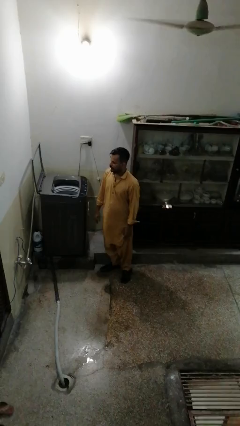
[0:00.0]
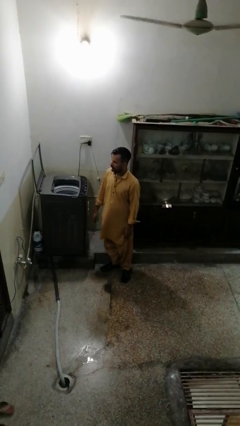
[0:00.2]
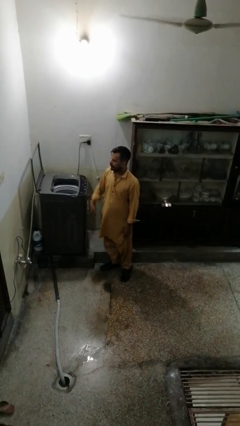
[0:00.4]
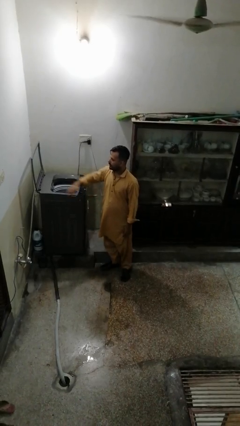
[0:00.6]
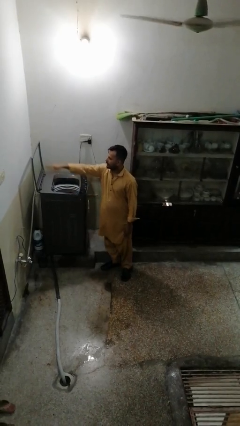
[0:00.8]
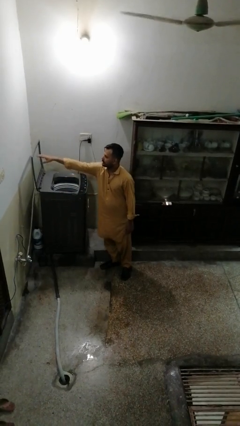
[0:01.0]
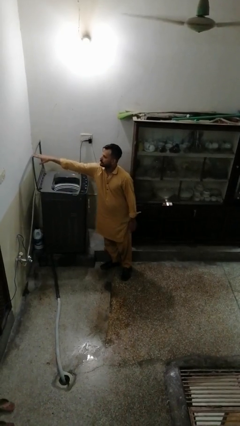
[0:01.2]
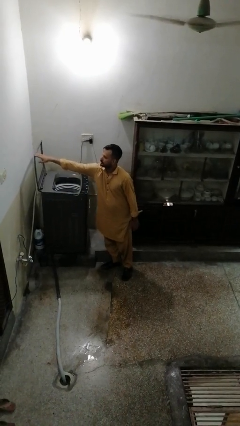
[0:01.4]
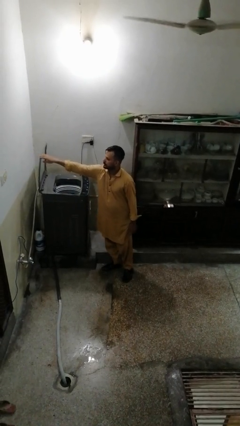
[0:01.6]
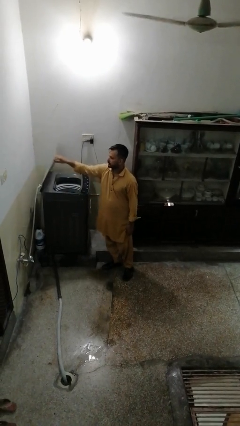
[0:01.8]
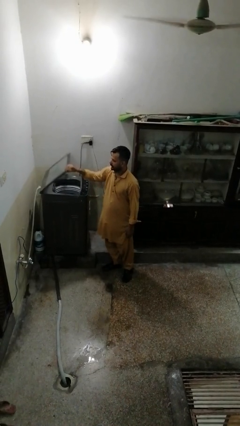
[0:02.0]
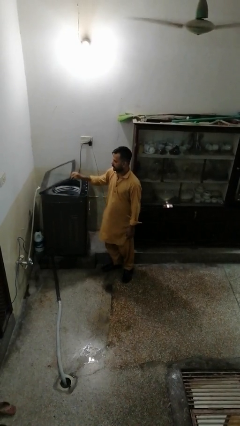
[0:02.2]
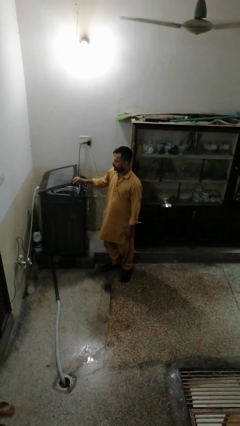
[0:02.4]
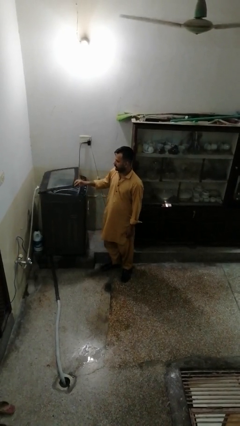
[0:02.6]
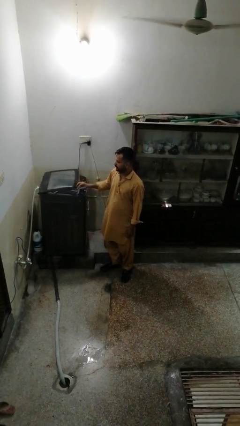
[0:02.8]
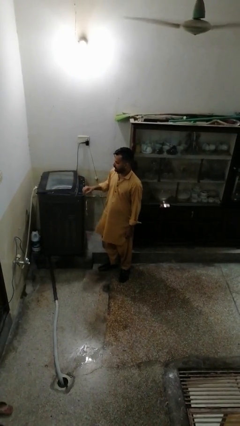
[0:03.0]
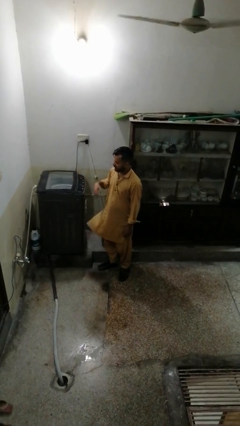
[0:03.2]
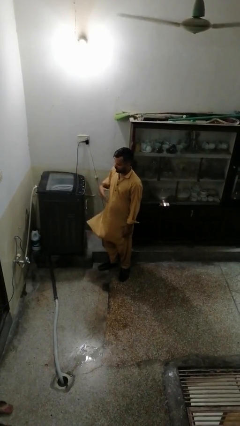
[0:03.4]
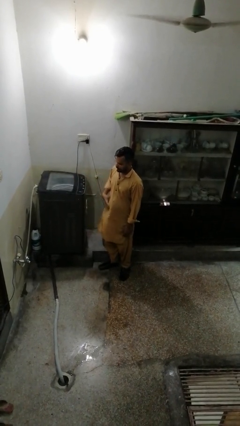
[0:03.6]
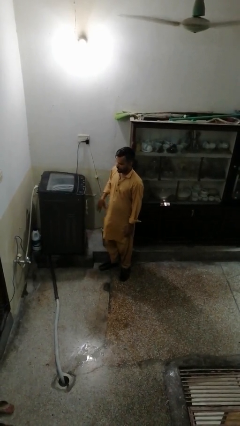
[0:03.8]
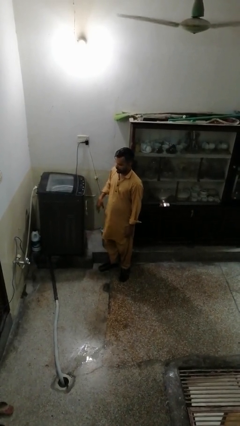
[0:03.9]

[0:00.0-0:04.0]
person closes clothes washer

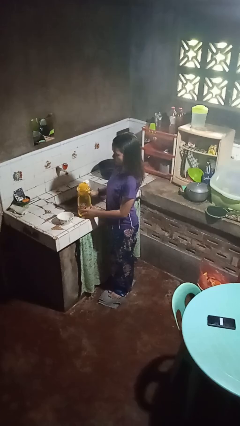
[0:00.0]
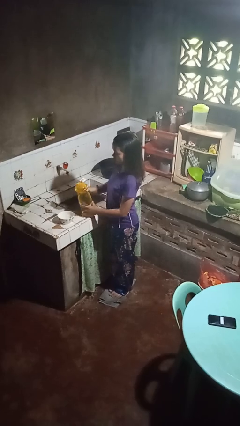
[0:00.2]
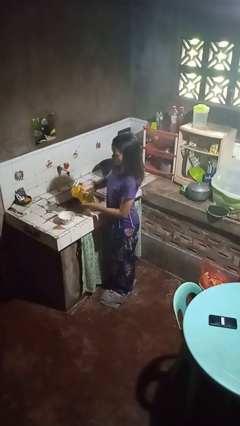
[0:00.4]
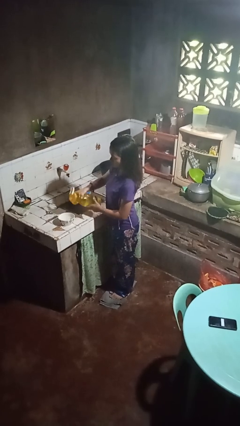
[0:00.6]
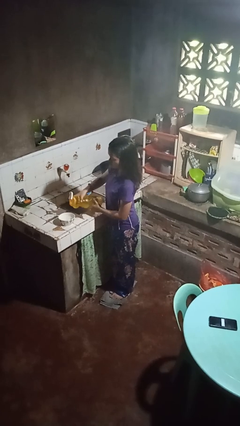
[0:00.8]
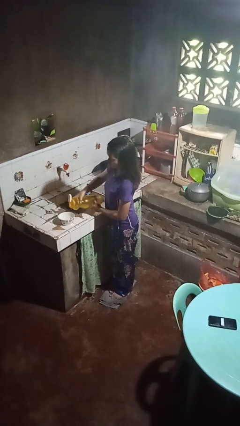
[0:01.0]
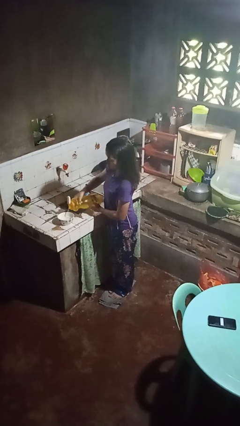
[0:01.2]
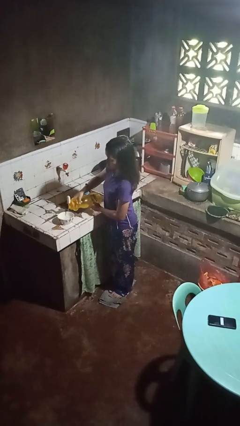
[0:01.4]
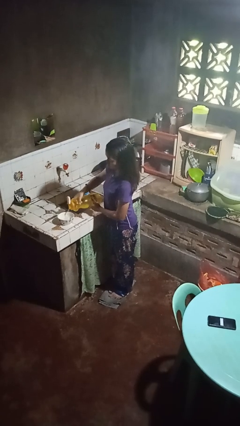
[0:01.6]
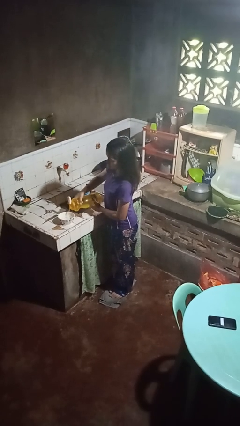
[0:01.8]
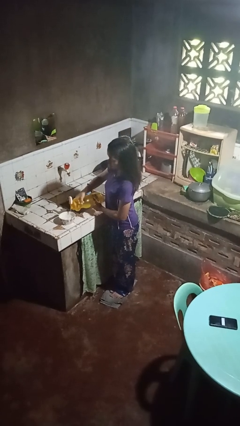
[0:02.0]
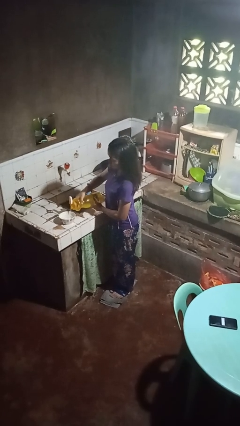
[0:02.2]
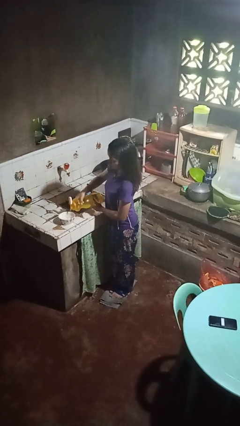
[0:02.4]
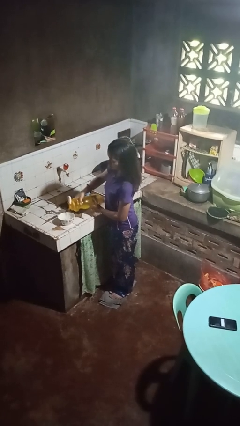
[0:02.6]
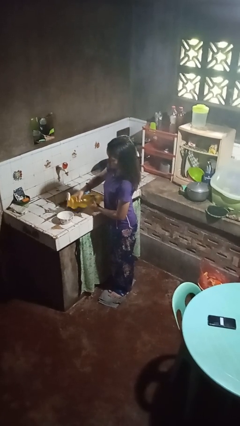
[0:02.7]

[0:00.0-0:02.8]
person pours into bowl

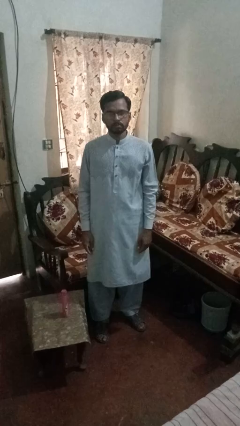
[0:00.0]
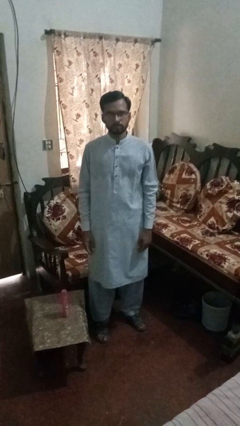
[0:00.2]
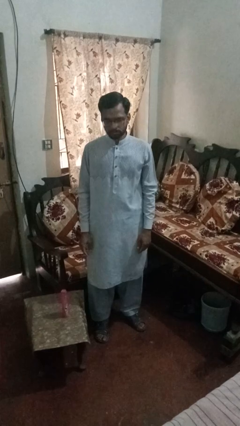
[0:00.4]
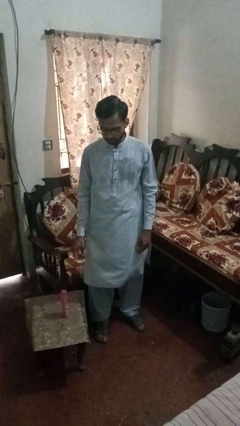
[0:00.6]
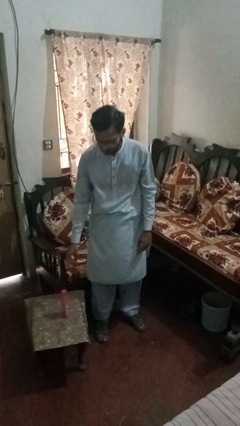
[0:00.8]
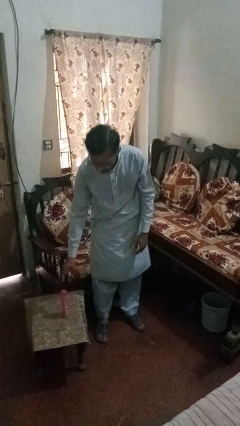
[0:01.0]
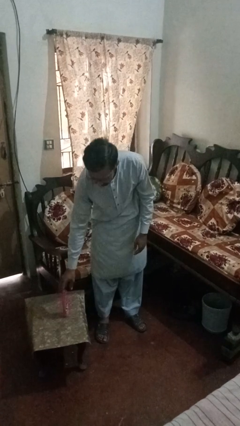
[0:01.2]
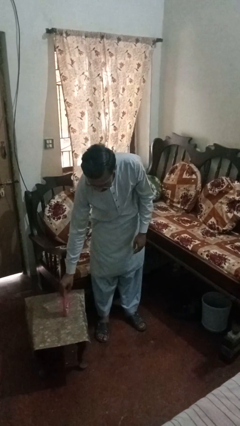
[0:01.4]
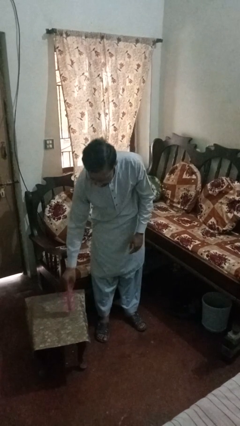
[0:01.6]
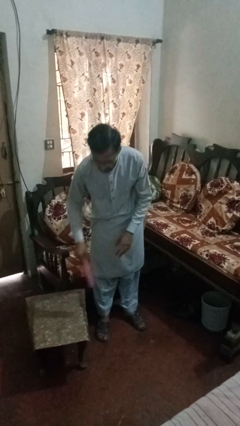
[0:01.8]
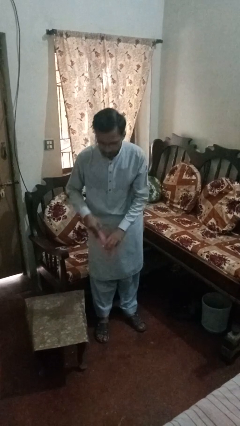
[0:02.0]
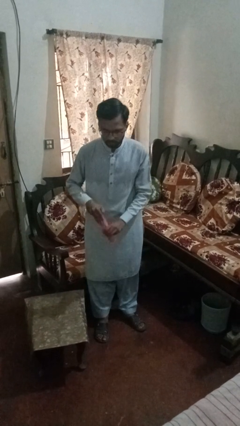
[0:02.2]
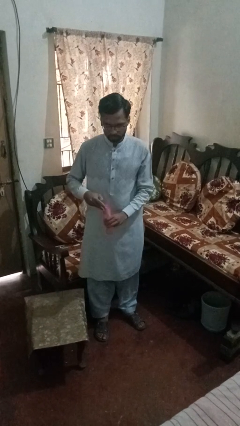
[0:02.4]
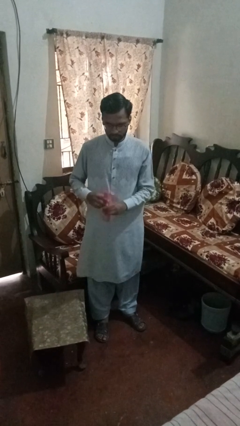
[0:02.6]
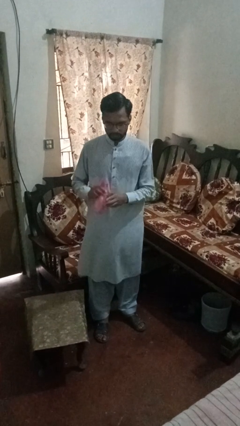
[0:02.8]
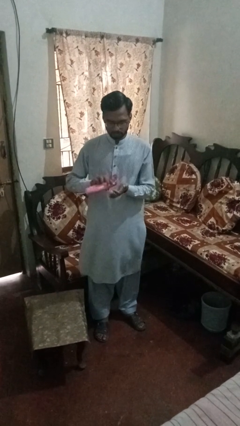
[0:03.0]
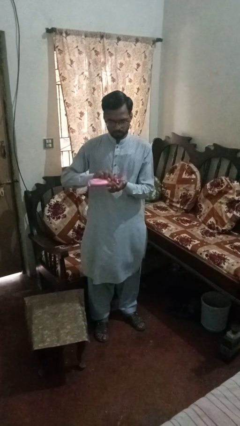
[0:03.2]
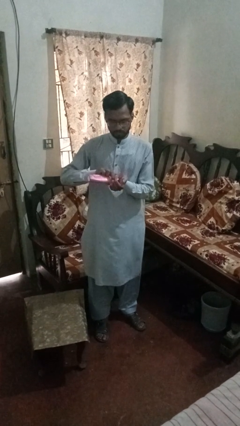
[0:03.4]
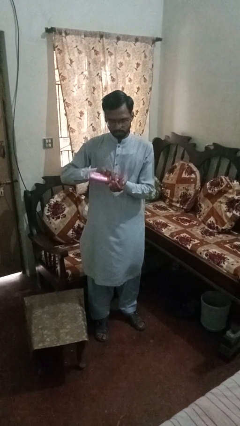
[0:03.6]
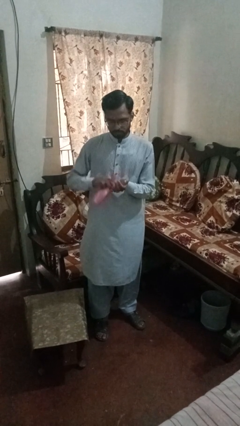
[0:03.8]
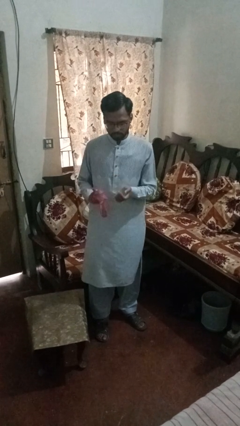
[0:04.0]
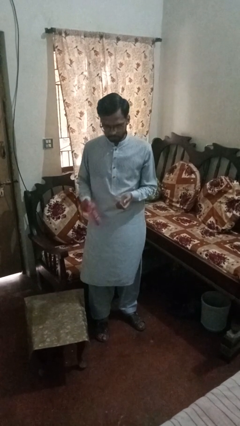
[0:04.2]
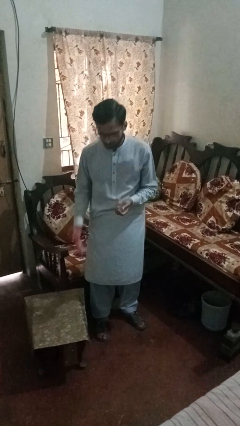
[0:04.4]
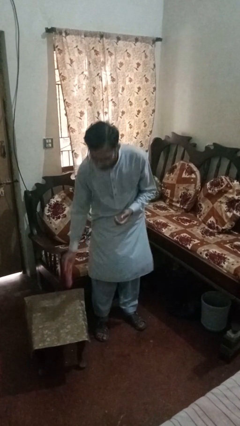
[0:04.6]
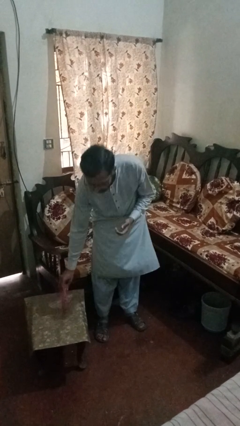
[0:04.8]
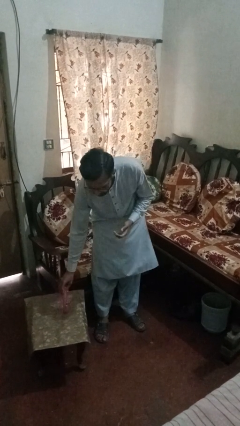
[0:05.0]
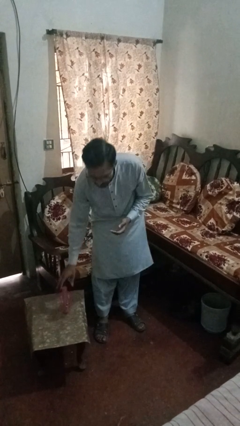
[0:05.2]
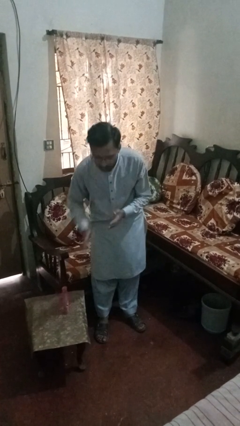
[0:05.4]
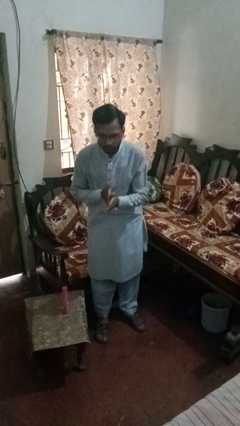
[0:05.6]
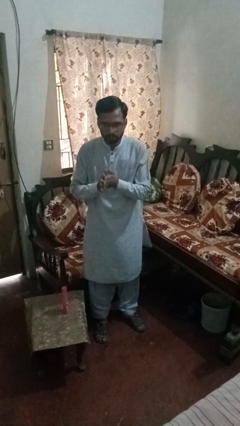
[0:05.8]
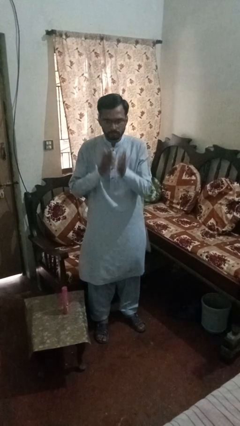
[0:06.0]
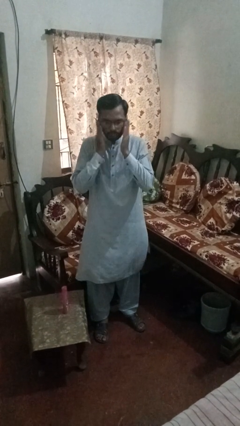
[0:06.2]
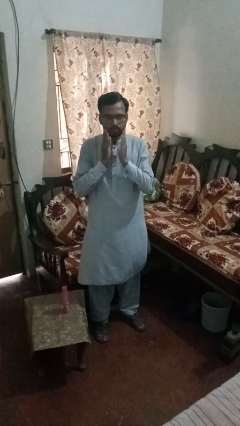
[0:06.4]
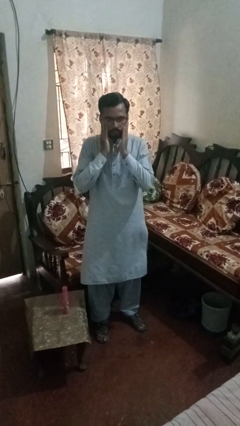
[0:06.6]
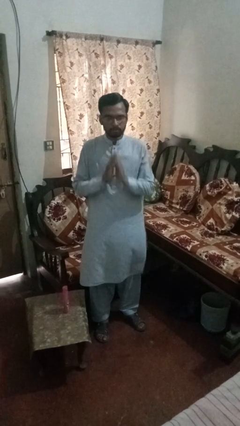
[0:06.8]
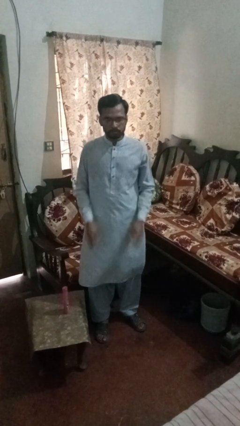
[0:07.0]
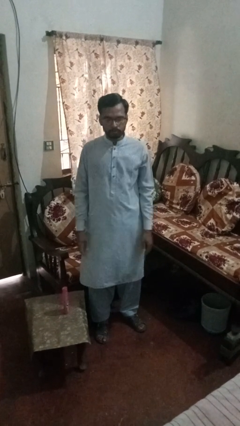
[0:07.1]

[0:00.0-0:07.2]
person applies sunscreen

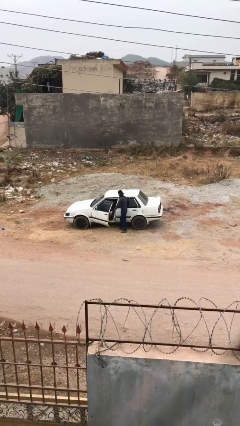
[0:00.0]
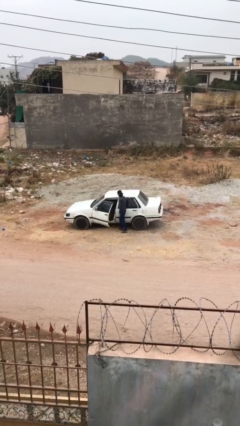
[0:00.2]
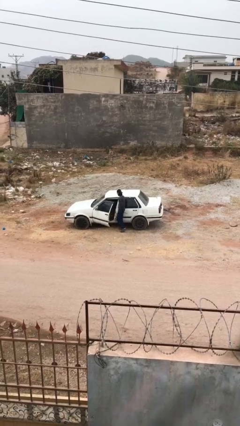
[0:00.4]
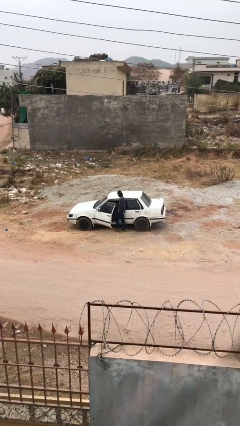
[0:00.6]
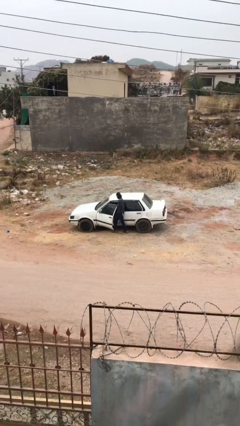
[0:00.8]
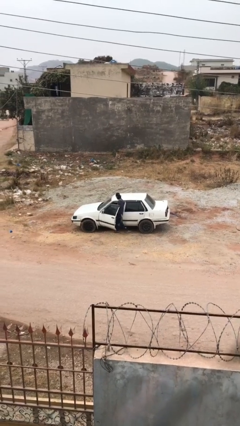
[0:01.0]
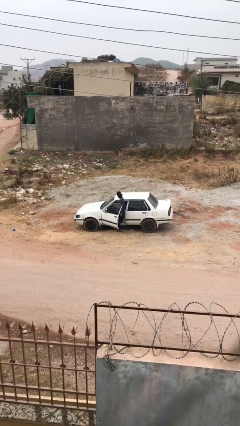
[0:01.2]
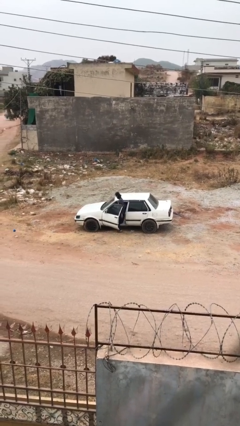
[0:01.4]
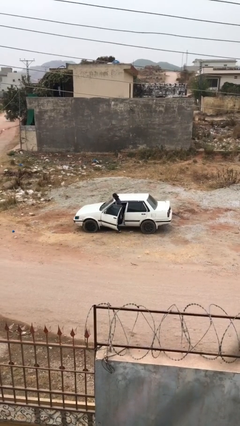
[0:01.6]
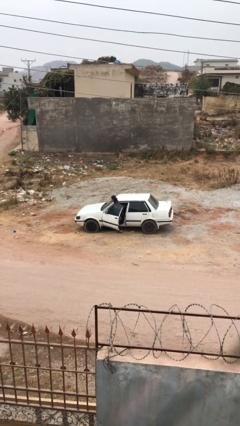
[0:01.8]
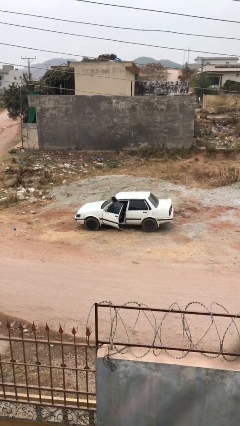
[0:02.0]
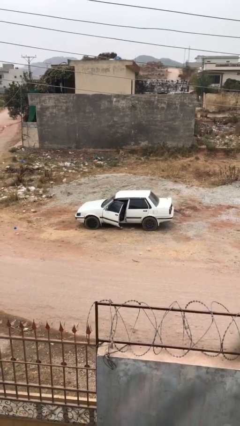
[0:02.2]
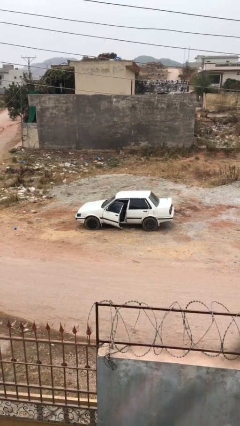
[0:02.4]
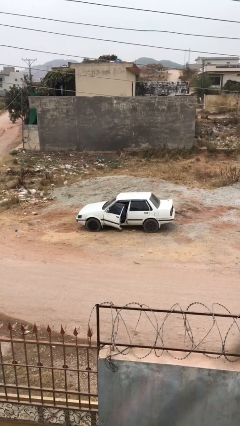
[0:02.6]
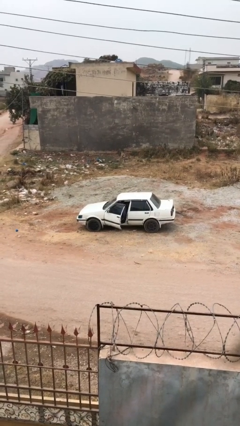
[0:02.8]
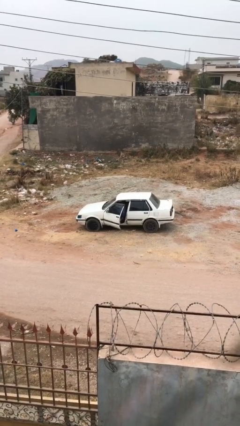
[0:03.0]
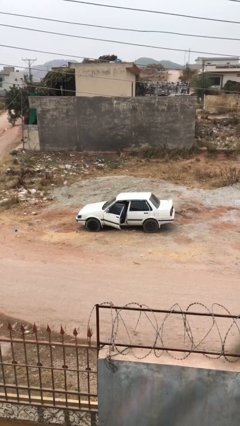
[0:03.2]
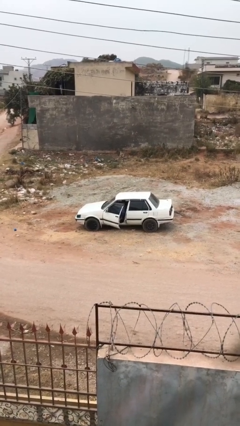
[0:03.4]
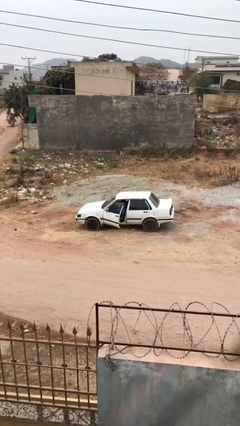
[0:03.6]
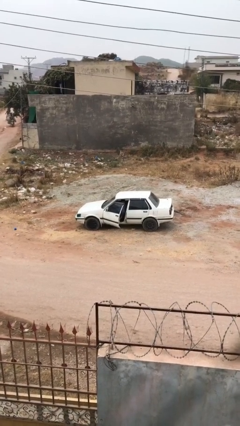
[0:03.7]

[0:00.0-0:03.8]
person enters car

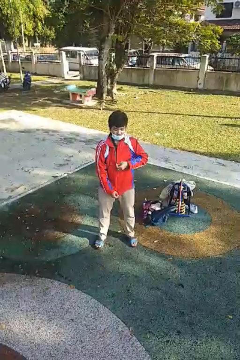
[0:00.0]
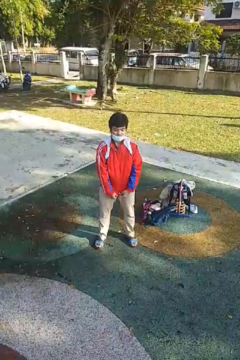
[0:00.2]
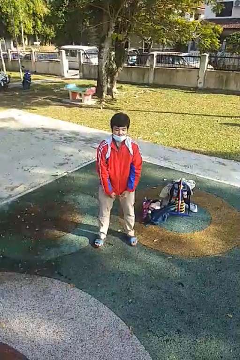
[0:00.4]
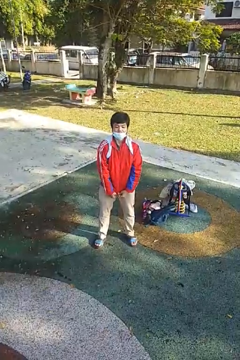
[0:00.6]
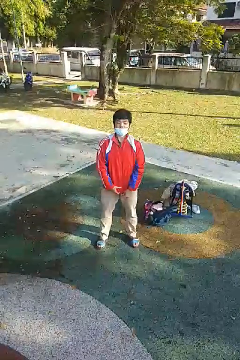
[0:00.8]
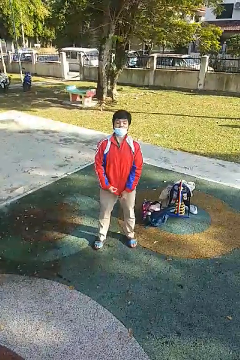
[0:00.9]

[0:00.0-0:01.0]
person unzips jacket
